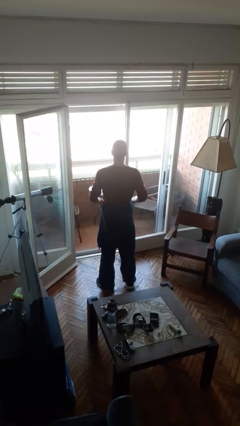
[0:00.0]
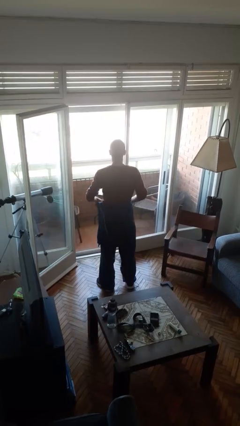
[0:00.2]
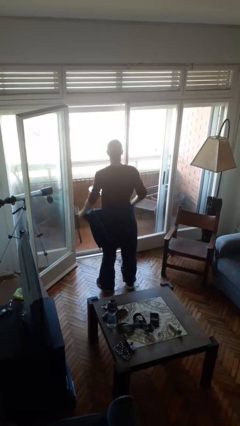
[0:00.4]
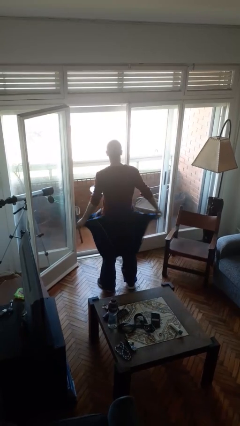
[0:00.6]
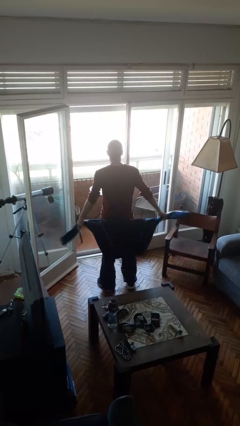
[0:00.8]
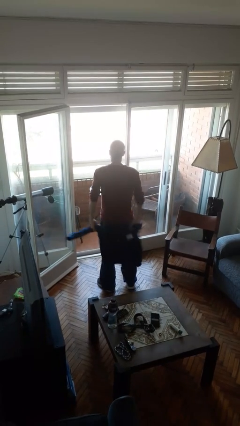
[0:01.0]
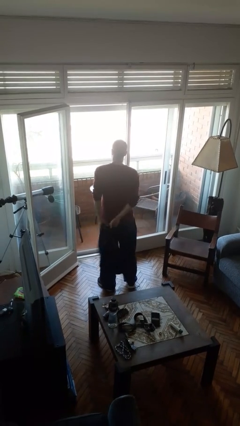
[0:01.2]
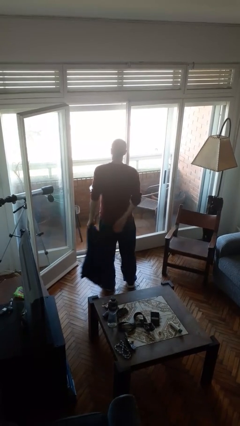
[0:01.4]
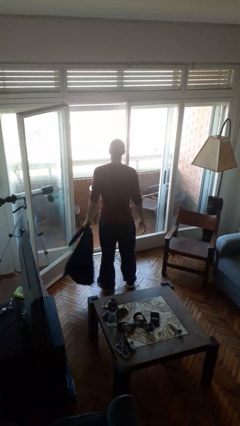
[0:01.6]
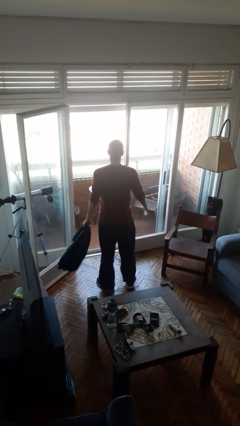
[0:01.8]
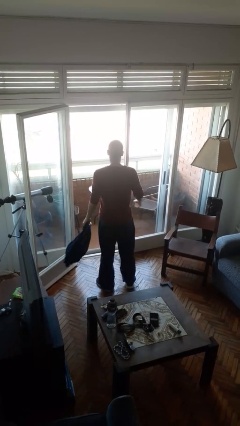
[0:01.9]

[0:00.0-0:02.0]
person unties jacket around waist

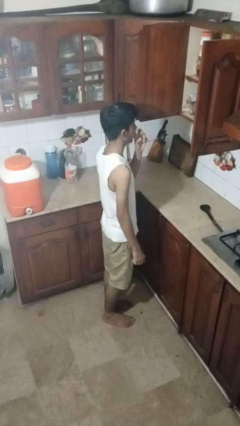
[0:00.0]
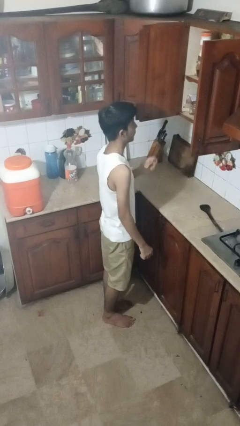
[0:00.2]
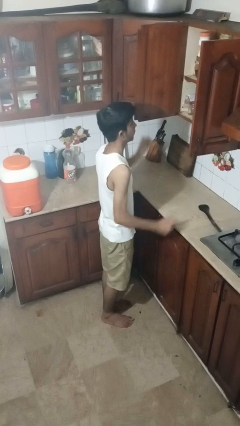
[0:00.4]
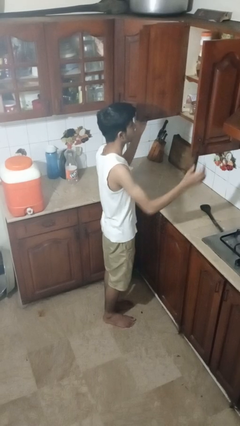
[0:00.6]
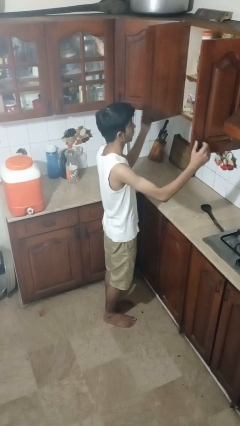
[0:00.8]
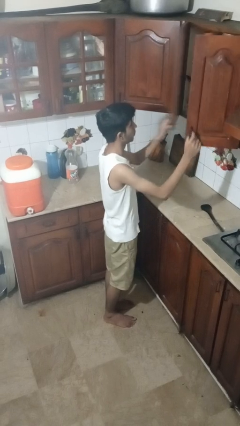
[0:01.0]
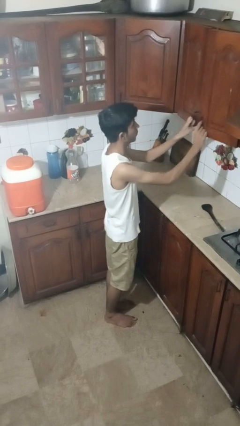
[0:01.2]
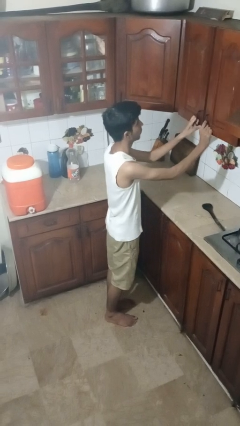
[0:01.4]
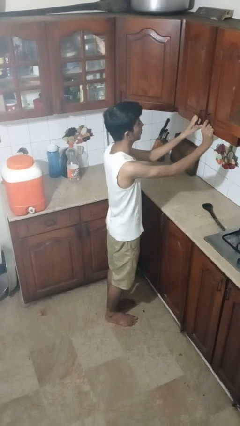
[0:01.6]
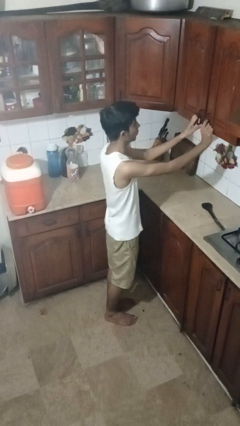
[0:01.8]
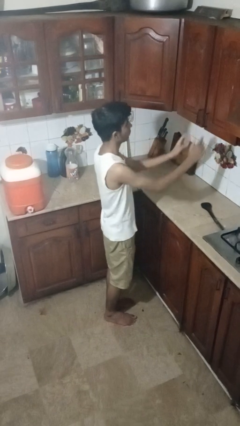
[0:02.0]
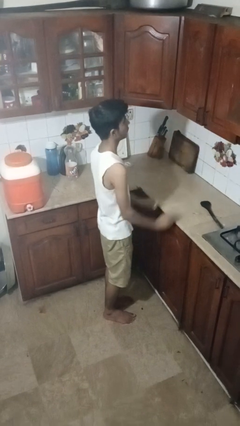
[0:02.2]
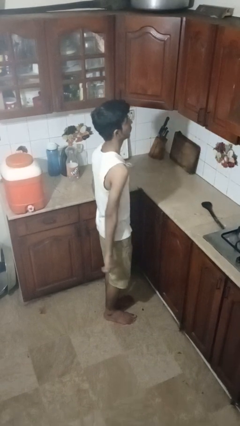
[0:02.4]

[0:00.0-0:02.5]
person closes cabinet

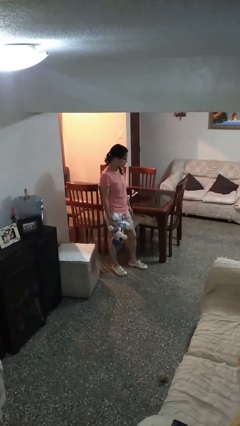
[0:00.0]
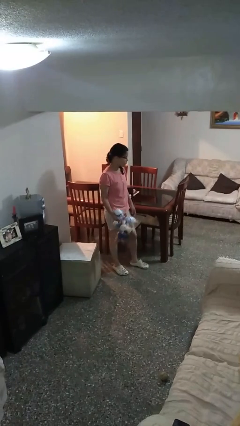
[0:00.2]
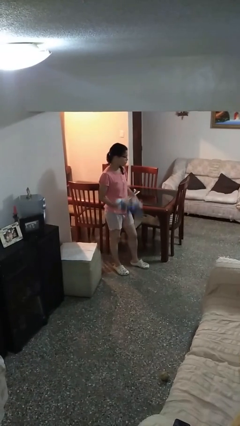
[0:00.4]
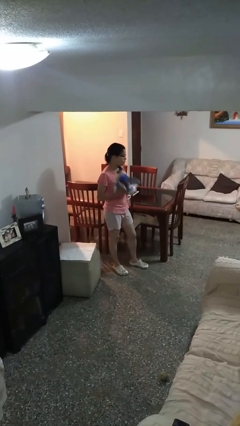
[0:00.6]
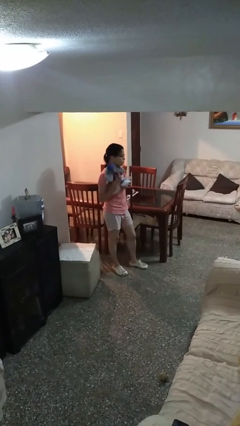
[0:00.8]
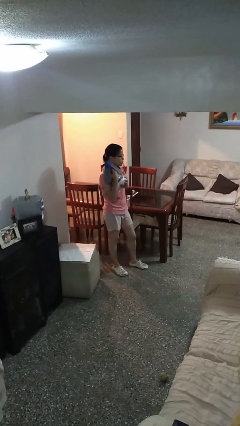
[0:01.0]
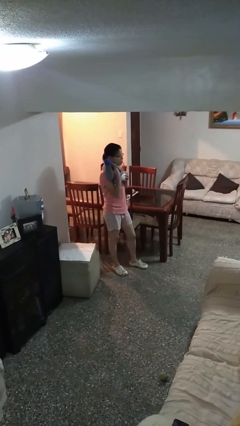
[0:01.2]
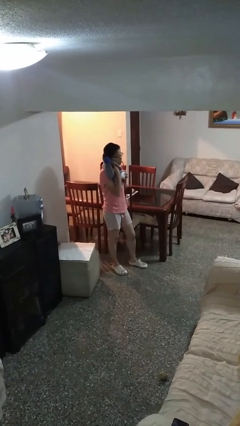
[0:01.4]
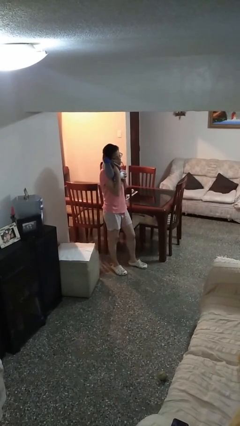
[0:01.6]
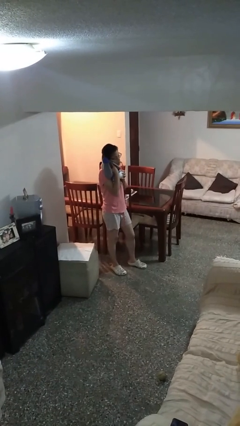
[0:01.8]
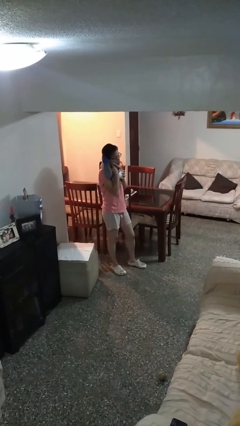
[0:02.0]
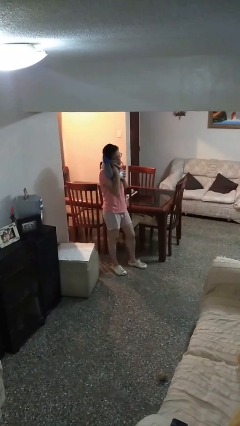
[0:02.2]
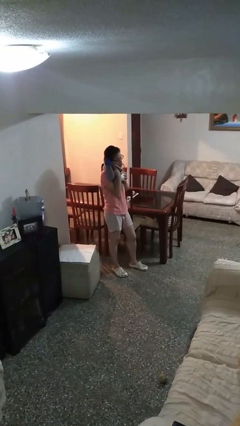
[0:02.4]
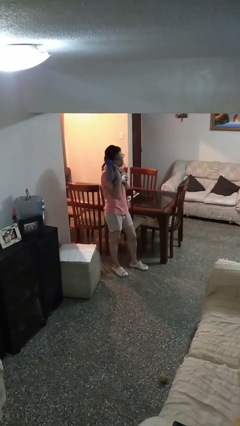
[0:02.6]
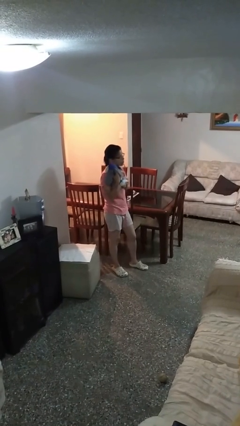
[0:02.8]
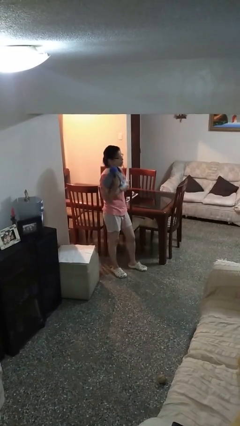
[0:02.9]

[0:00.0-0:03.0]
person hugs stuffed animal

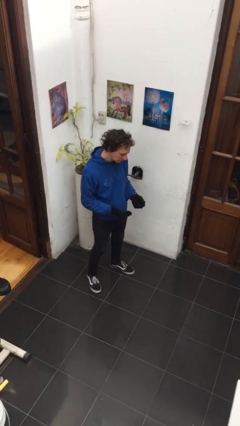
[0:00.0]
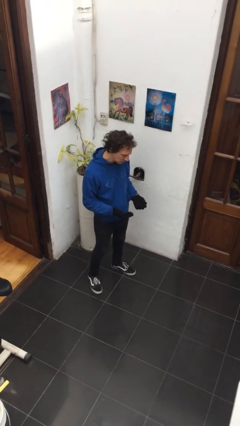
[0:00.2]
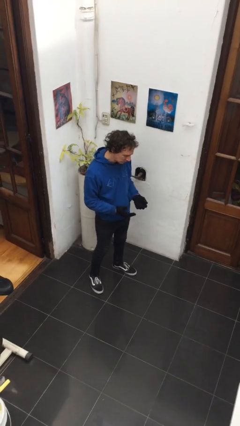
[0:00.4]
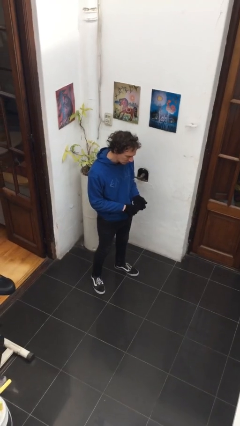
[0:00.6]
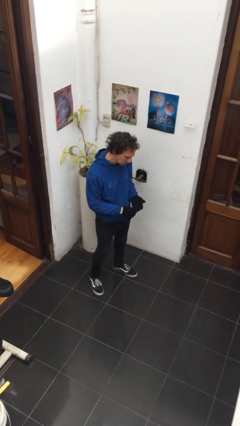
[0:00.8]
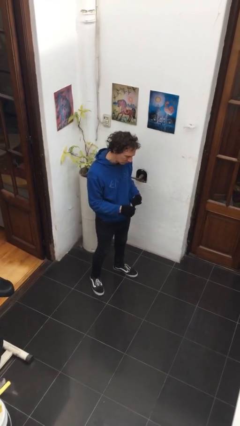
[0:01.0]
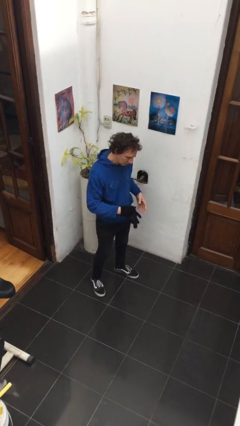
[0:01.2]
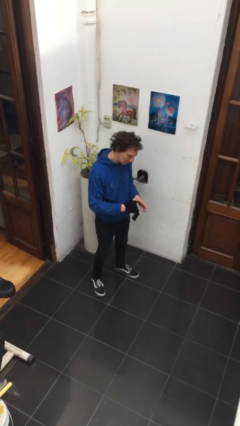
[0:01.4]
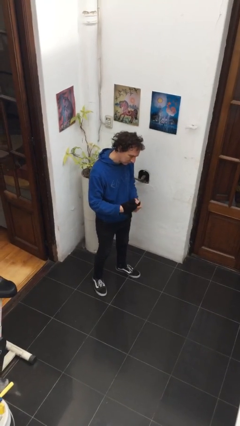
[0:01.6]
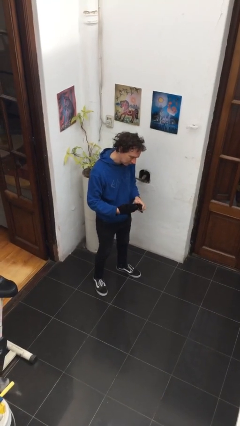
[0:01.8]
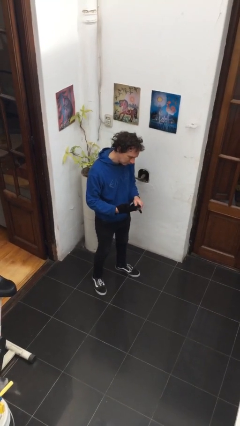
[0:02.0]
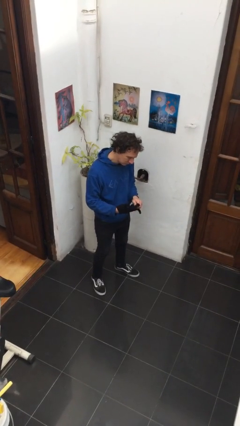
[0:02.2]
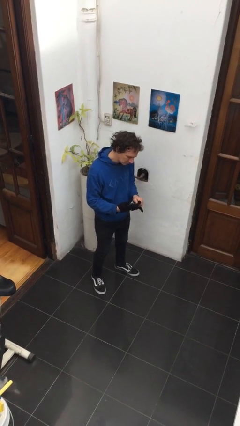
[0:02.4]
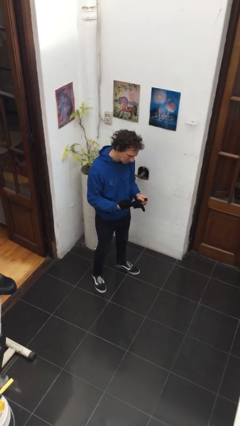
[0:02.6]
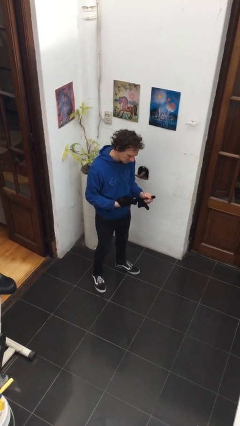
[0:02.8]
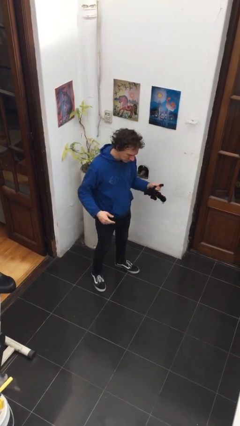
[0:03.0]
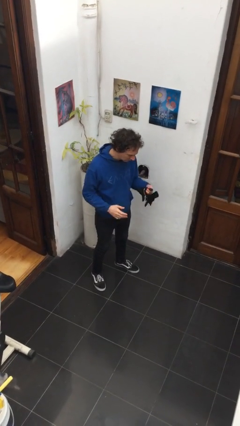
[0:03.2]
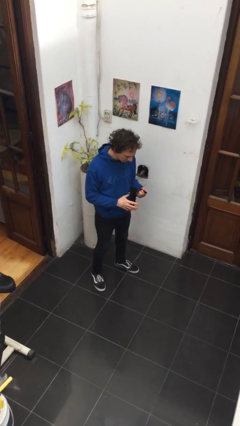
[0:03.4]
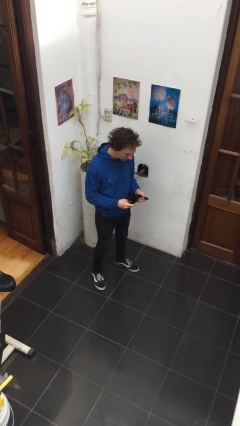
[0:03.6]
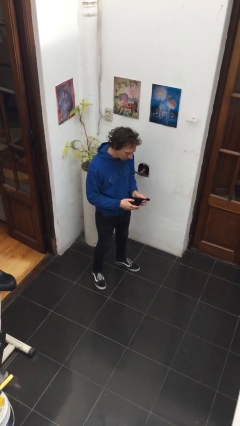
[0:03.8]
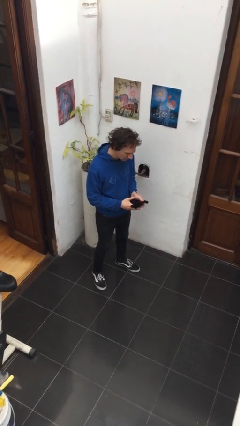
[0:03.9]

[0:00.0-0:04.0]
person takes off gloves

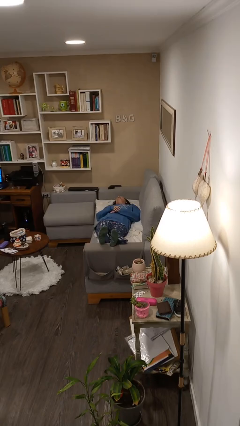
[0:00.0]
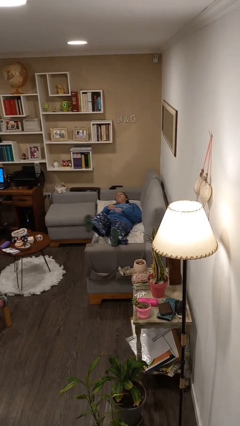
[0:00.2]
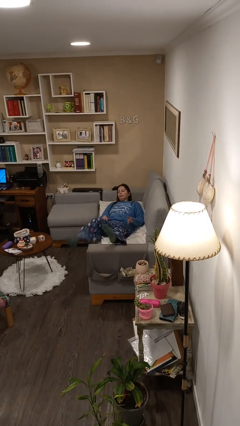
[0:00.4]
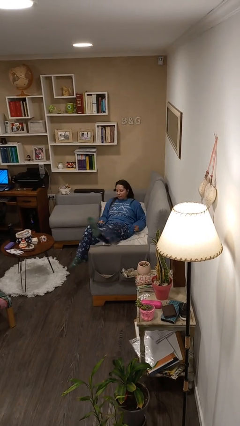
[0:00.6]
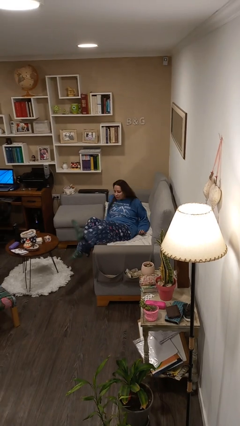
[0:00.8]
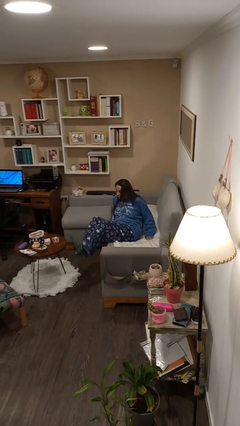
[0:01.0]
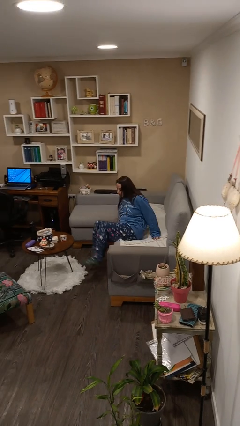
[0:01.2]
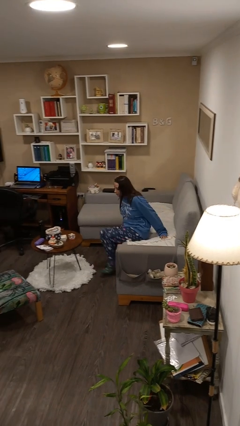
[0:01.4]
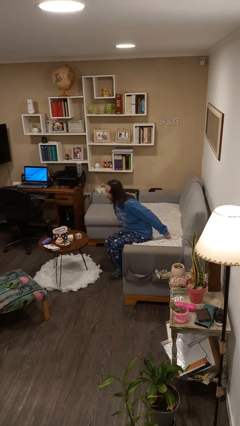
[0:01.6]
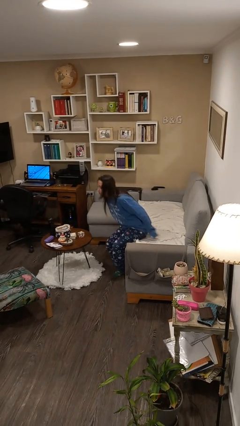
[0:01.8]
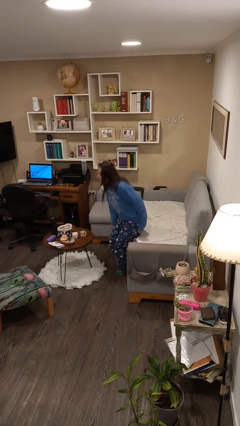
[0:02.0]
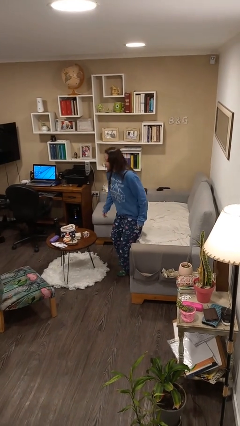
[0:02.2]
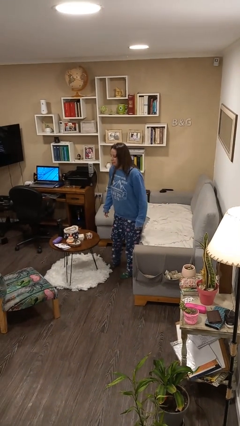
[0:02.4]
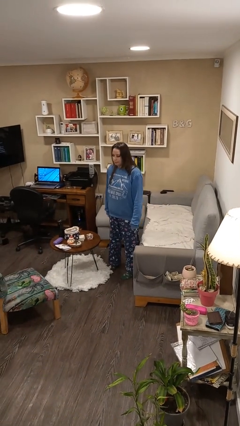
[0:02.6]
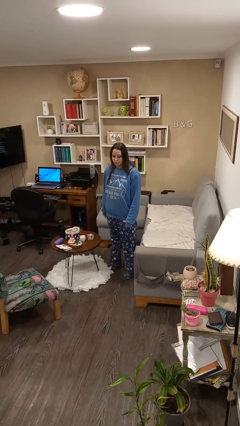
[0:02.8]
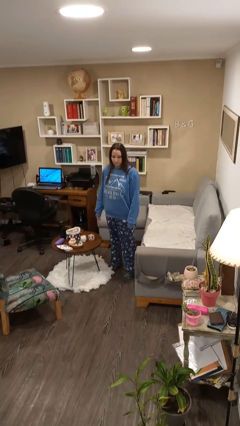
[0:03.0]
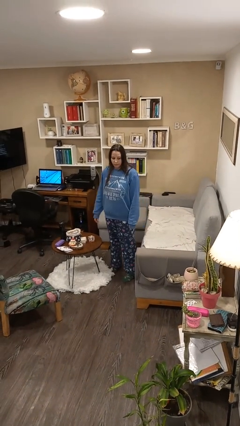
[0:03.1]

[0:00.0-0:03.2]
person stands up

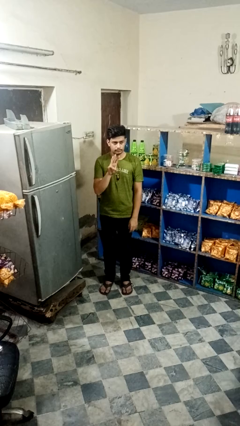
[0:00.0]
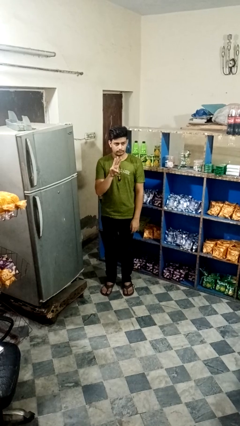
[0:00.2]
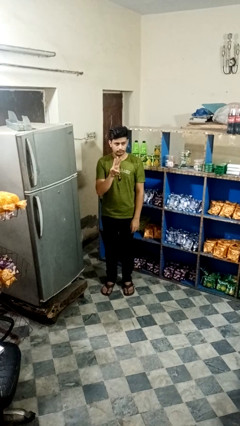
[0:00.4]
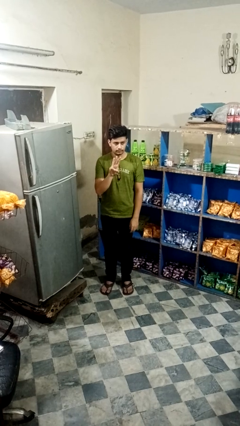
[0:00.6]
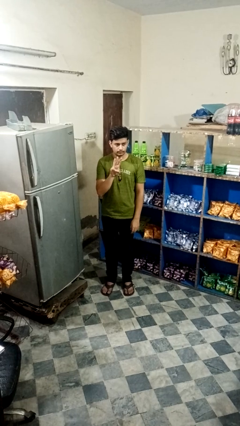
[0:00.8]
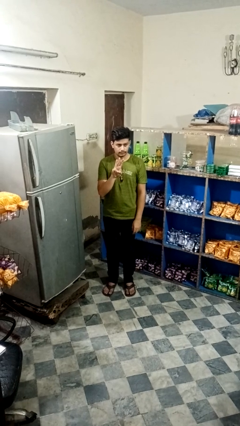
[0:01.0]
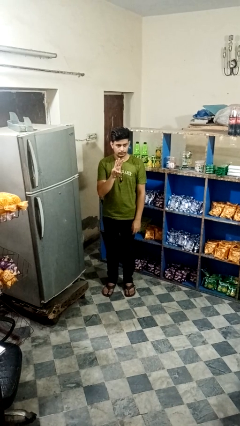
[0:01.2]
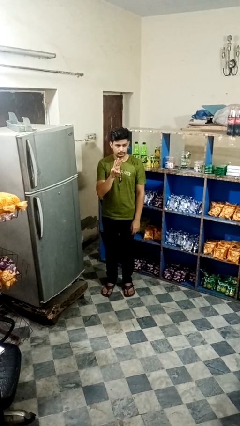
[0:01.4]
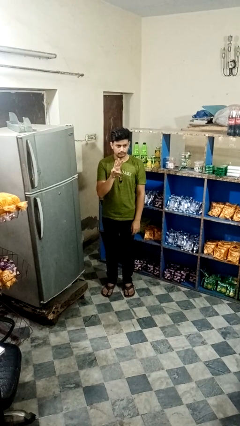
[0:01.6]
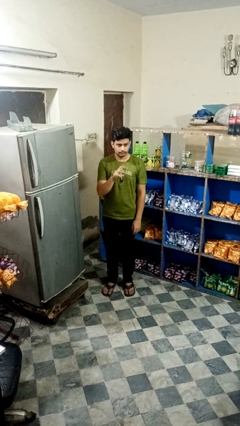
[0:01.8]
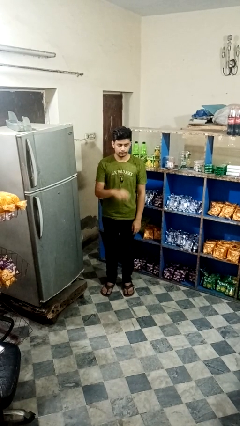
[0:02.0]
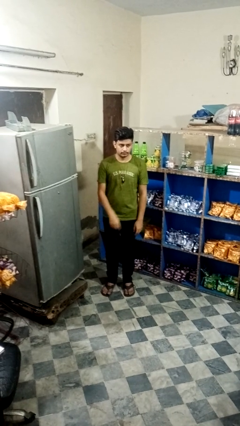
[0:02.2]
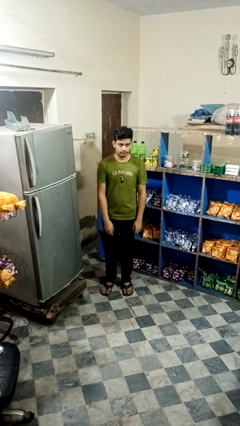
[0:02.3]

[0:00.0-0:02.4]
person gestures number three

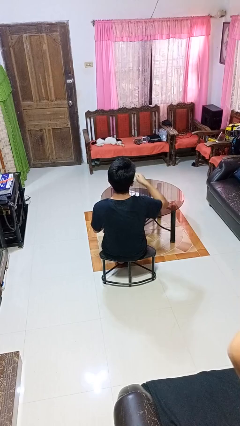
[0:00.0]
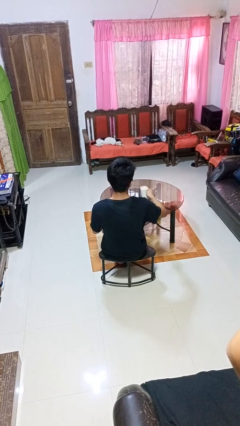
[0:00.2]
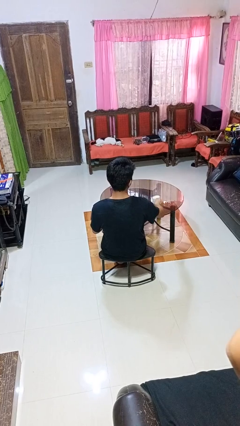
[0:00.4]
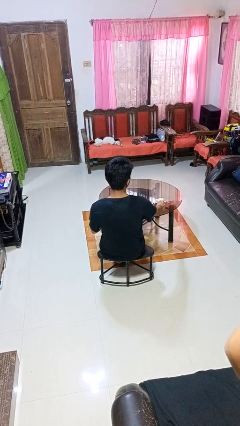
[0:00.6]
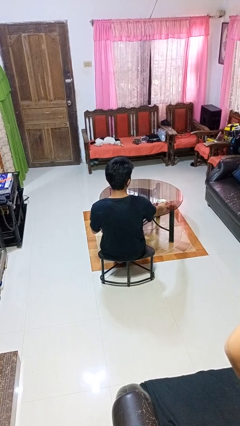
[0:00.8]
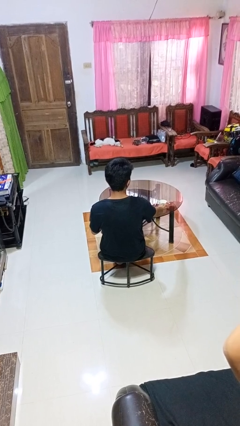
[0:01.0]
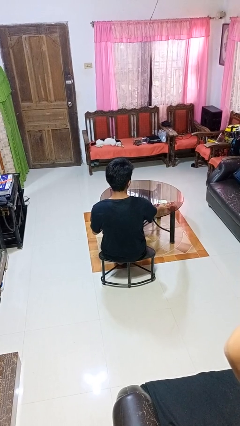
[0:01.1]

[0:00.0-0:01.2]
person puts down object on table
